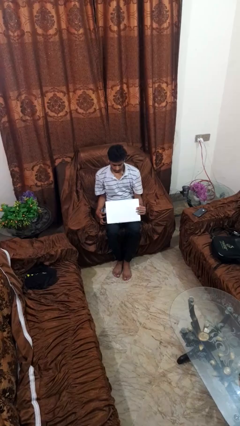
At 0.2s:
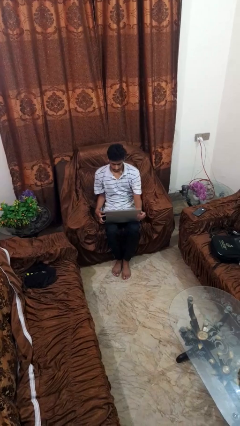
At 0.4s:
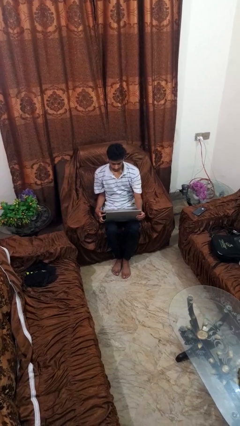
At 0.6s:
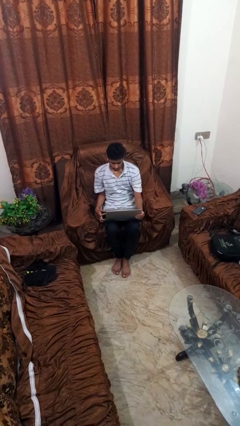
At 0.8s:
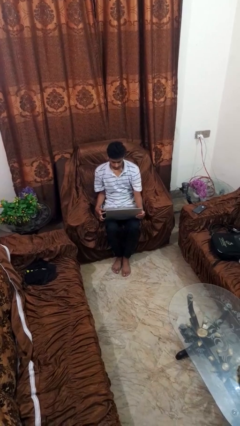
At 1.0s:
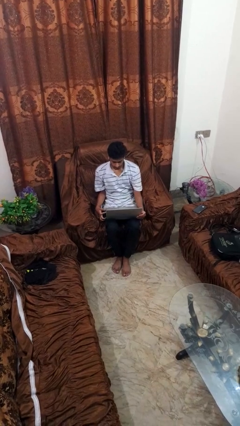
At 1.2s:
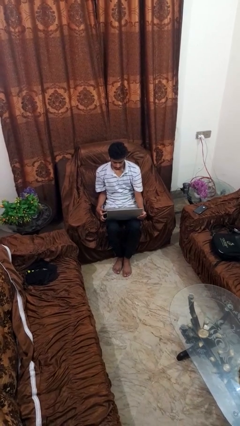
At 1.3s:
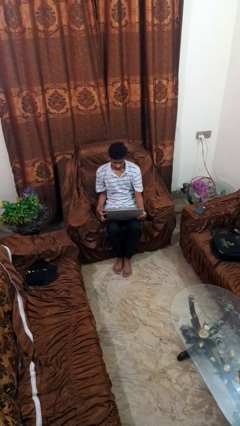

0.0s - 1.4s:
person opens laptop

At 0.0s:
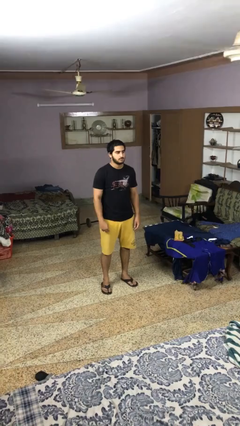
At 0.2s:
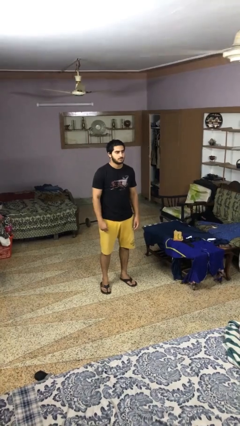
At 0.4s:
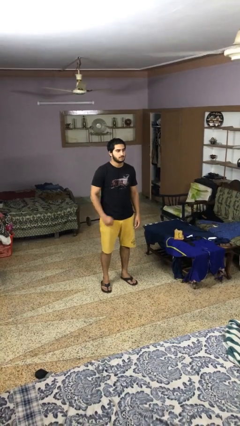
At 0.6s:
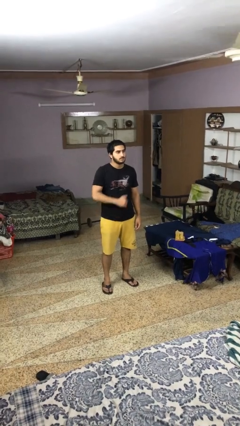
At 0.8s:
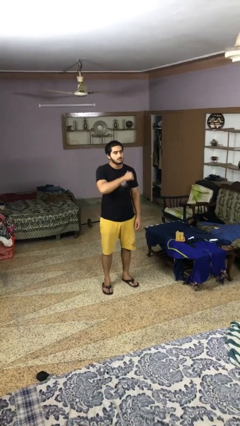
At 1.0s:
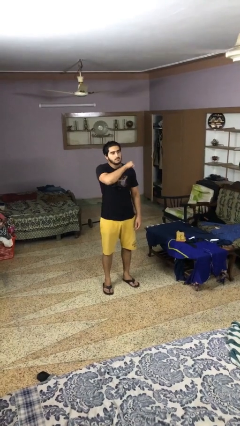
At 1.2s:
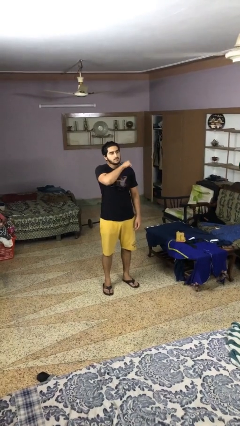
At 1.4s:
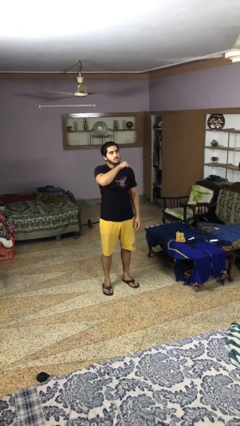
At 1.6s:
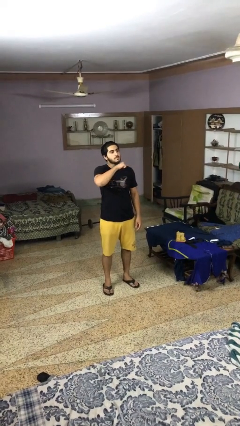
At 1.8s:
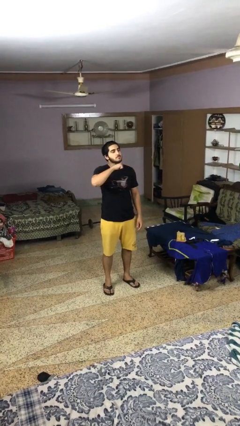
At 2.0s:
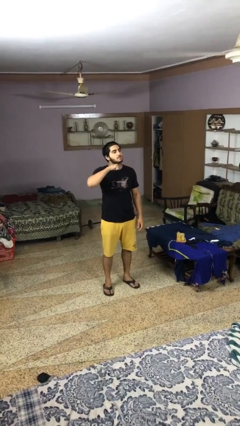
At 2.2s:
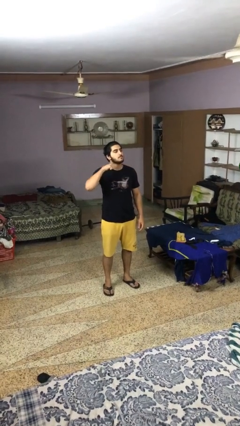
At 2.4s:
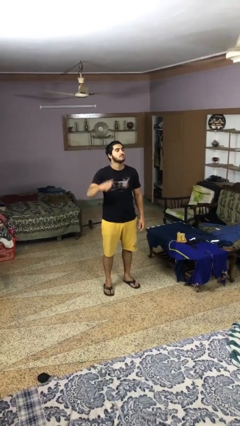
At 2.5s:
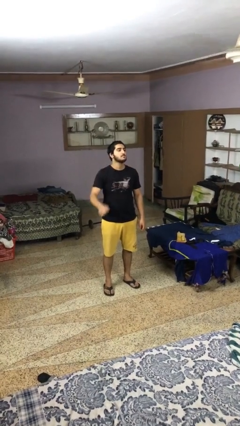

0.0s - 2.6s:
person gestures cut

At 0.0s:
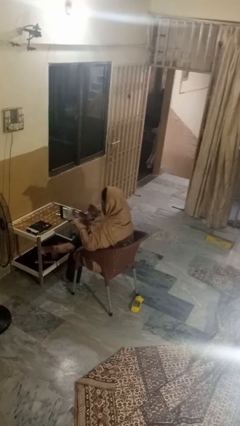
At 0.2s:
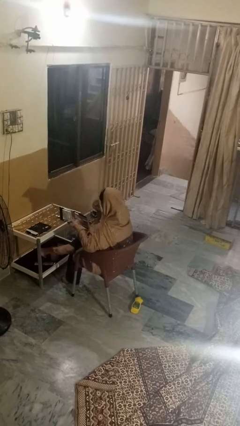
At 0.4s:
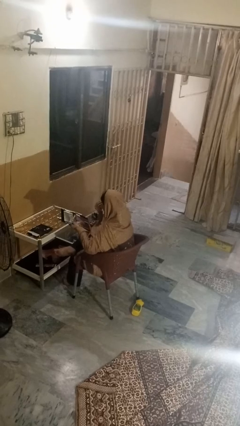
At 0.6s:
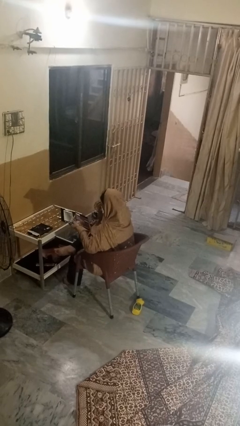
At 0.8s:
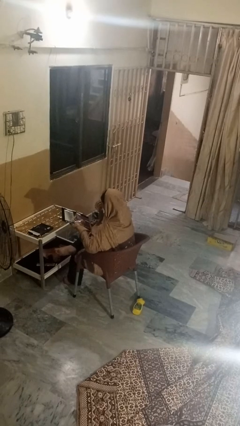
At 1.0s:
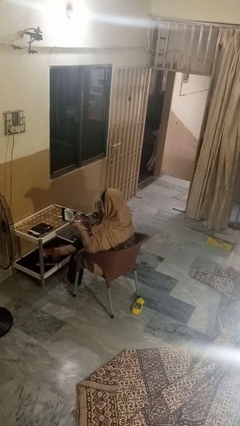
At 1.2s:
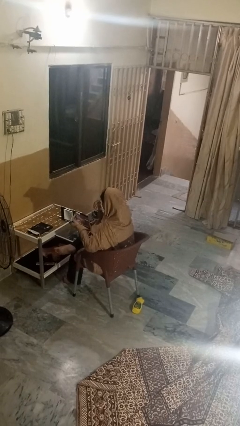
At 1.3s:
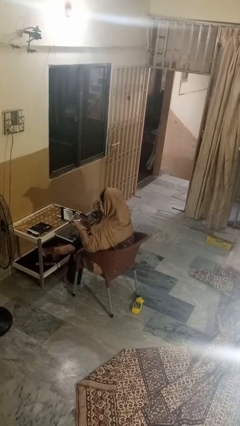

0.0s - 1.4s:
person applies eye makeup

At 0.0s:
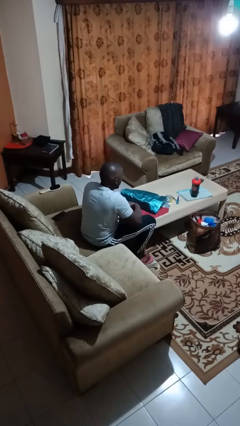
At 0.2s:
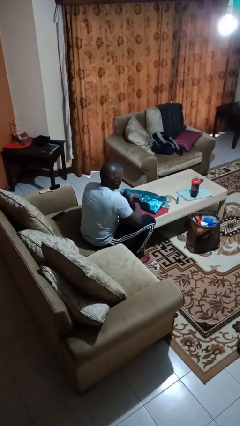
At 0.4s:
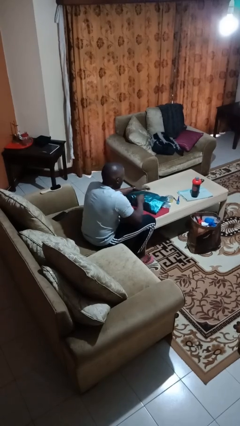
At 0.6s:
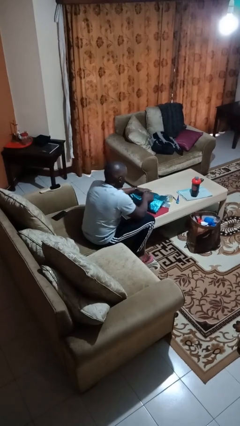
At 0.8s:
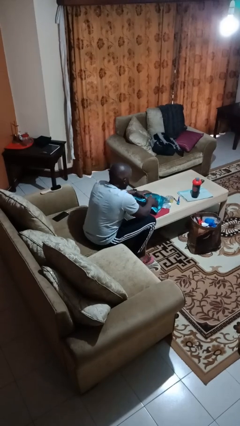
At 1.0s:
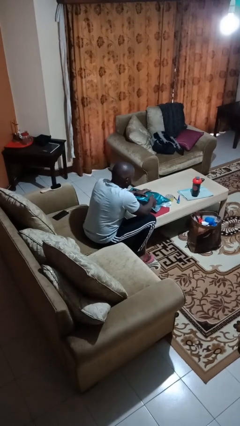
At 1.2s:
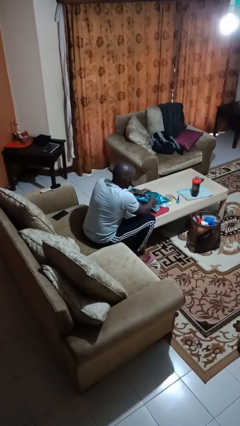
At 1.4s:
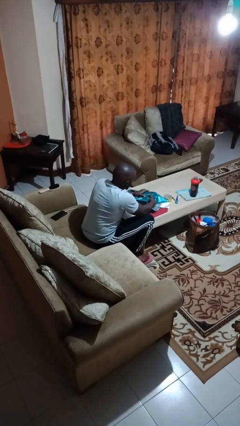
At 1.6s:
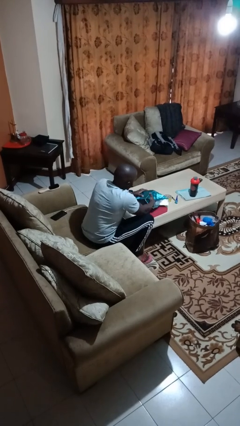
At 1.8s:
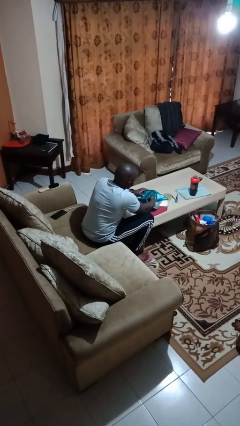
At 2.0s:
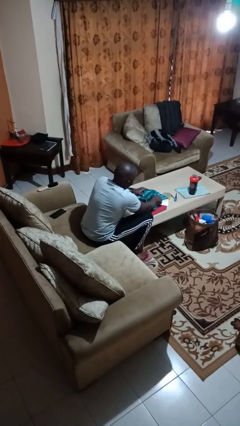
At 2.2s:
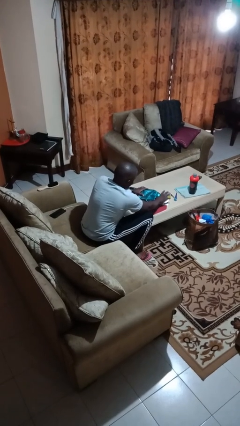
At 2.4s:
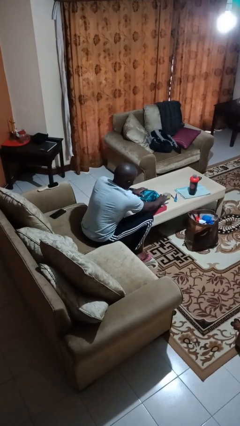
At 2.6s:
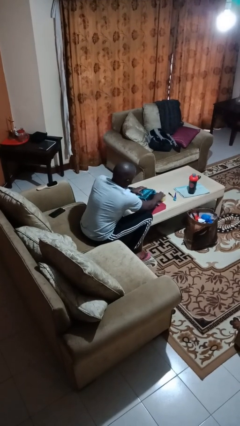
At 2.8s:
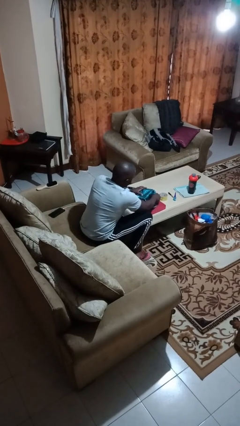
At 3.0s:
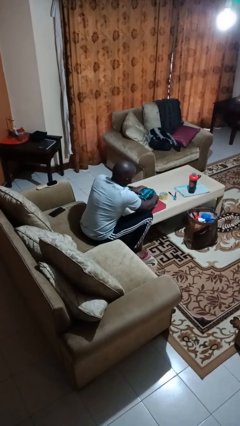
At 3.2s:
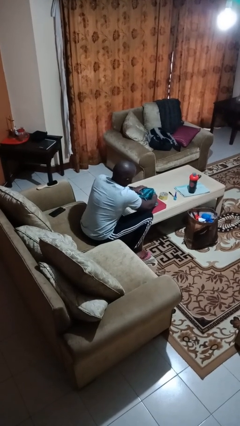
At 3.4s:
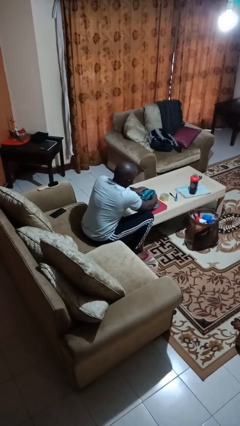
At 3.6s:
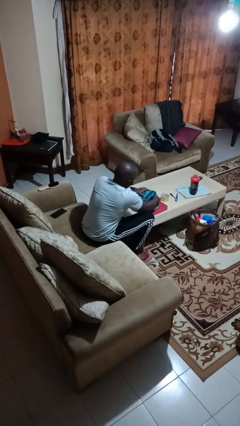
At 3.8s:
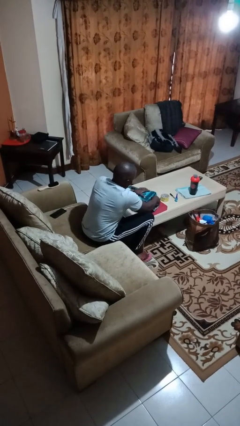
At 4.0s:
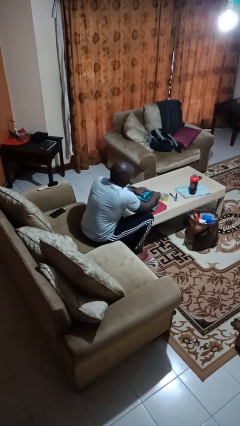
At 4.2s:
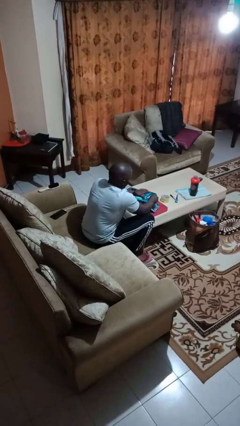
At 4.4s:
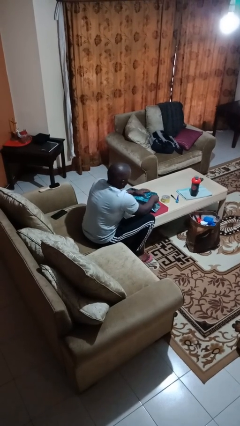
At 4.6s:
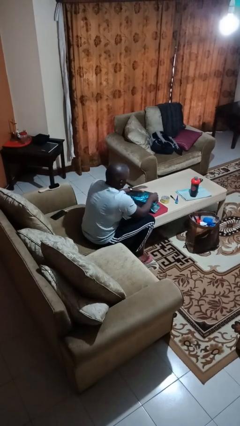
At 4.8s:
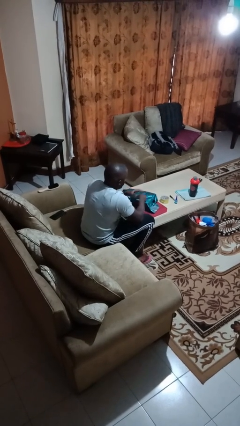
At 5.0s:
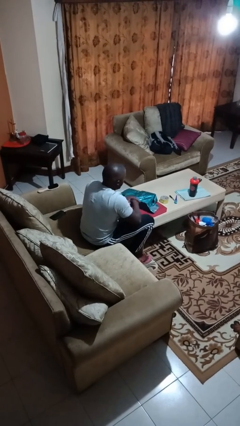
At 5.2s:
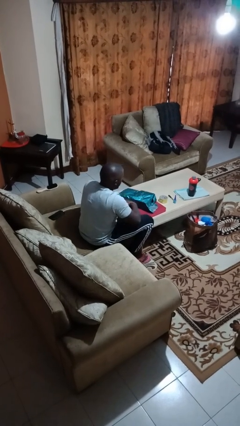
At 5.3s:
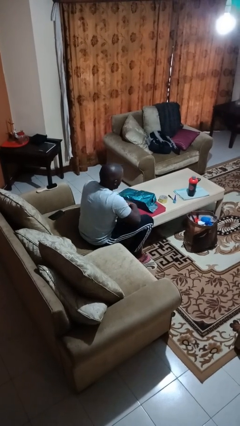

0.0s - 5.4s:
person wraps box

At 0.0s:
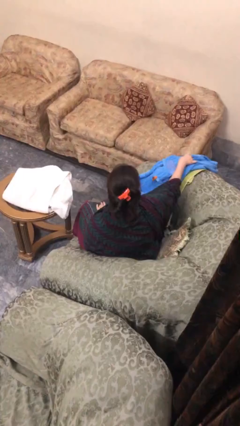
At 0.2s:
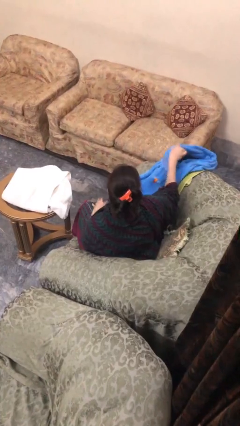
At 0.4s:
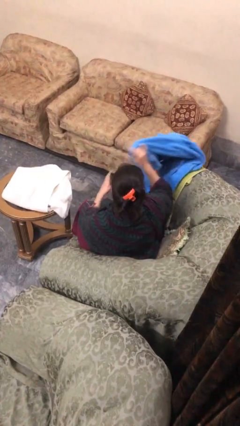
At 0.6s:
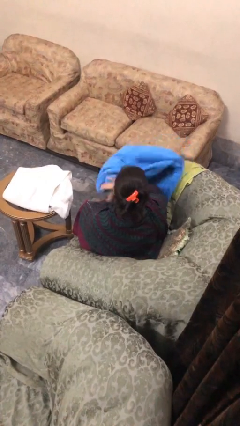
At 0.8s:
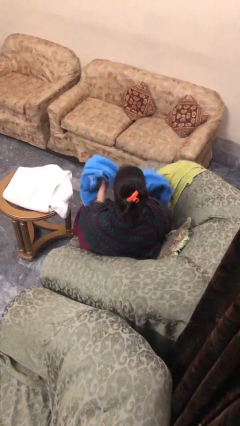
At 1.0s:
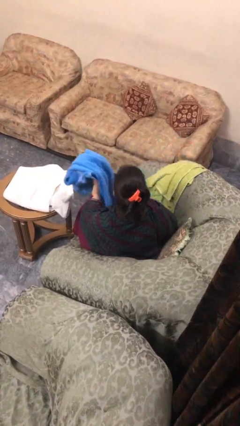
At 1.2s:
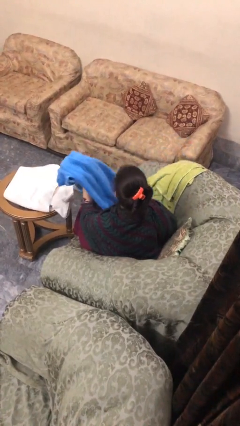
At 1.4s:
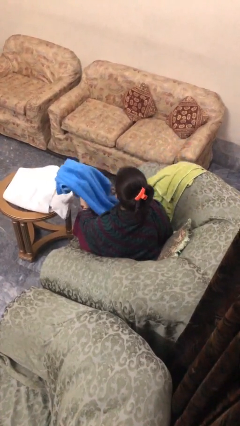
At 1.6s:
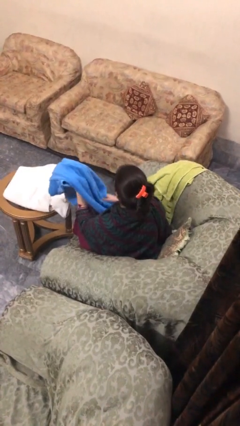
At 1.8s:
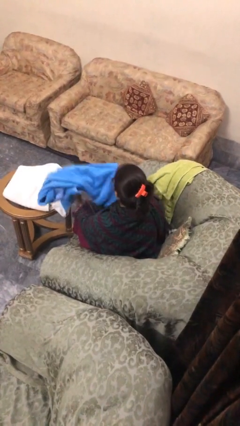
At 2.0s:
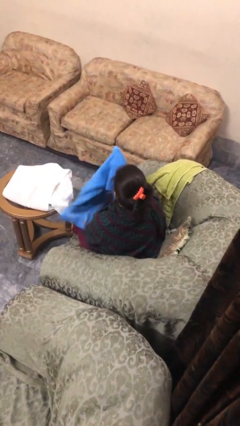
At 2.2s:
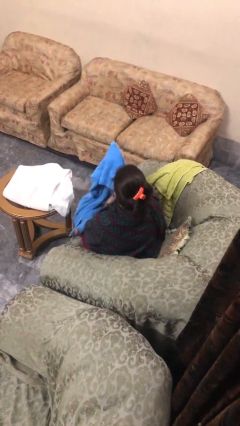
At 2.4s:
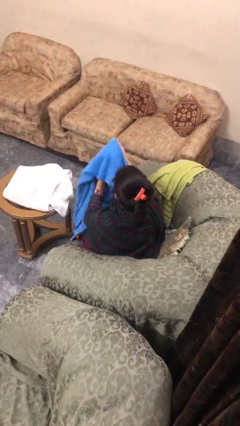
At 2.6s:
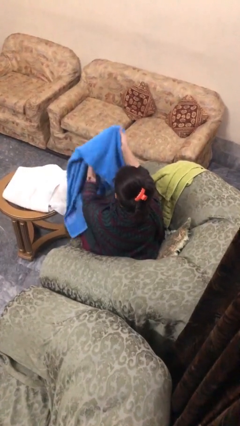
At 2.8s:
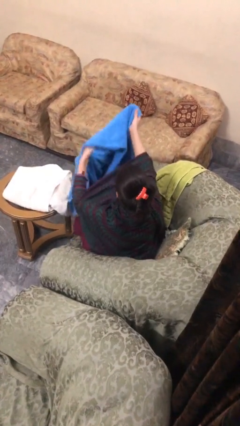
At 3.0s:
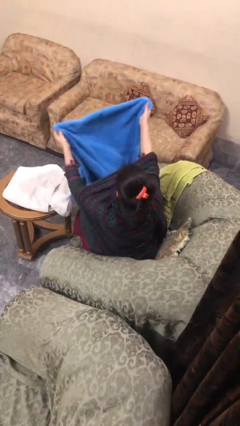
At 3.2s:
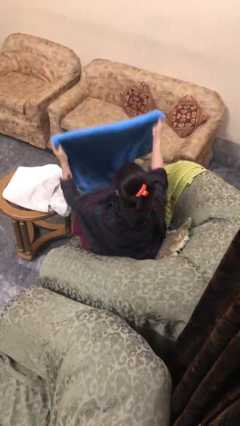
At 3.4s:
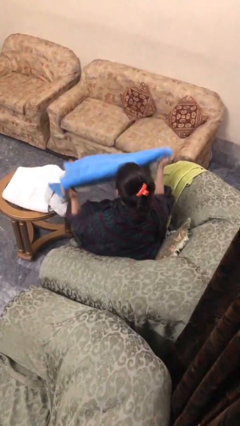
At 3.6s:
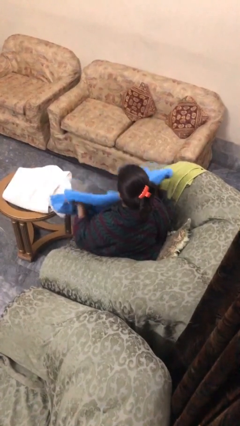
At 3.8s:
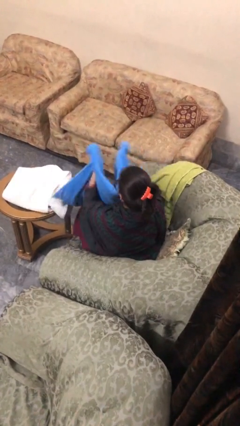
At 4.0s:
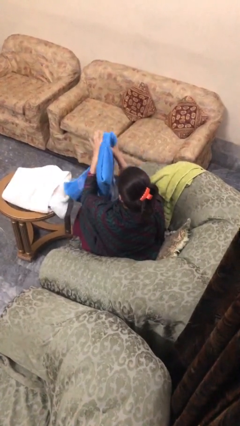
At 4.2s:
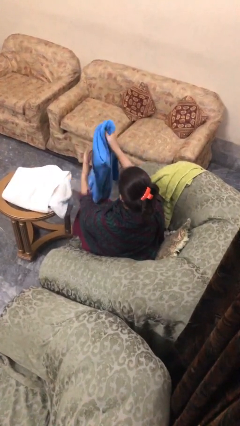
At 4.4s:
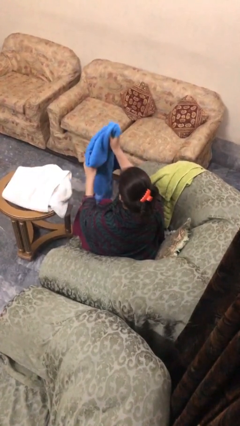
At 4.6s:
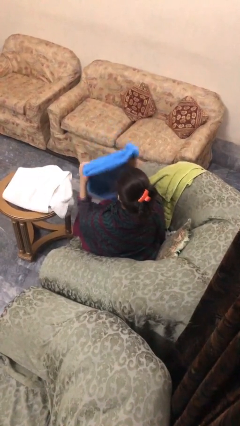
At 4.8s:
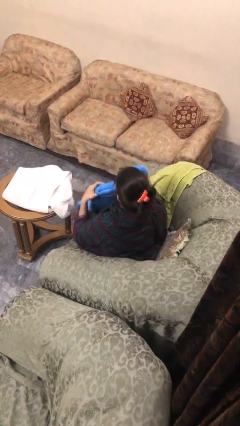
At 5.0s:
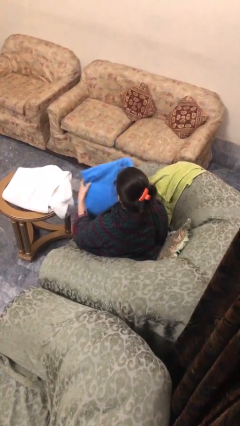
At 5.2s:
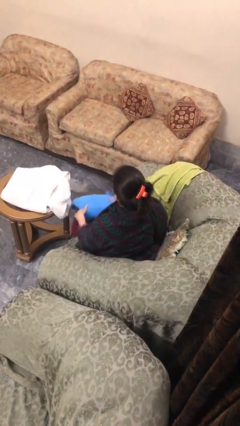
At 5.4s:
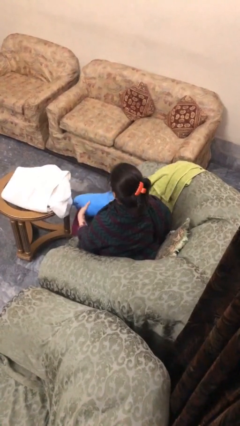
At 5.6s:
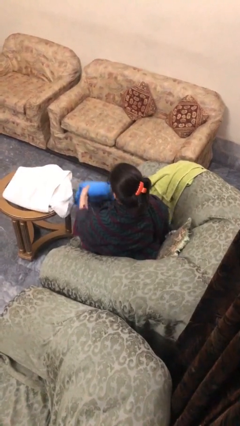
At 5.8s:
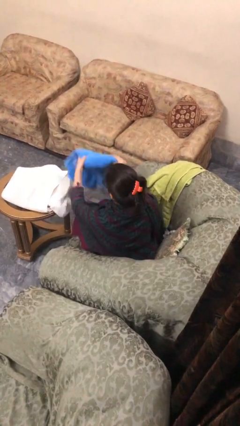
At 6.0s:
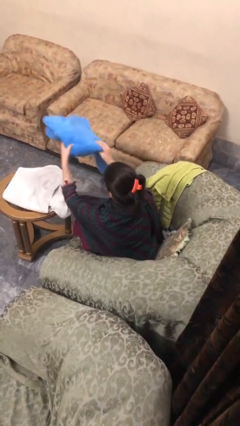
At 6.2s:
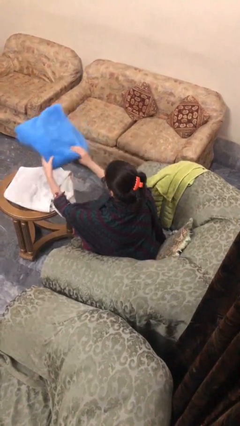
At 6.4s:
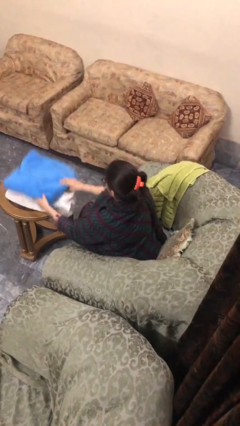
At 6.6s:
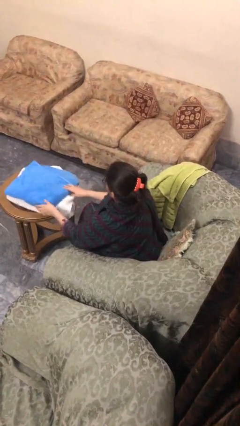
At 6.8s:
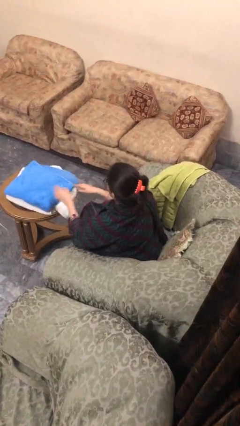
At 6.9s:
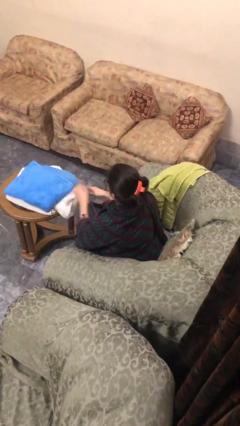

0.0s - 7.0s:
person folds towel
